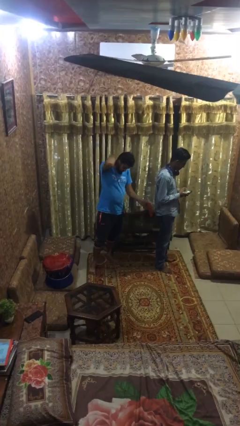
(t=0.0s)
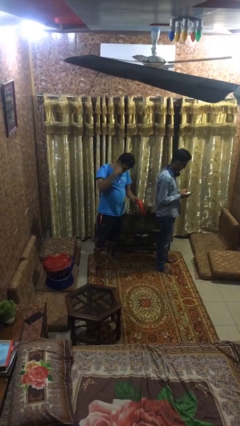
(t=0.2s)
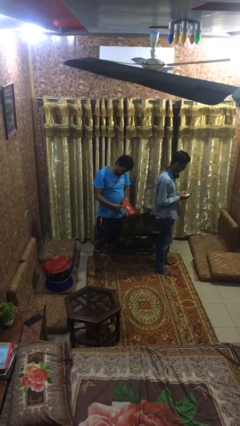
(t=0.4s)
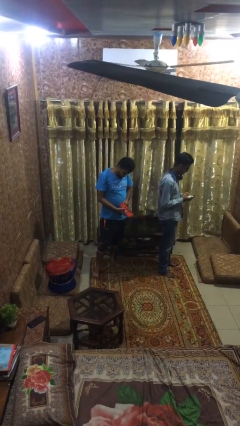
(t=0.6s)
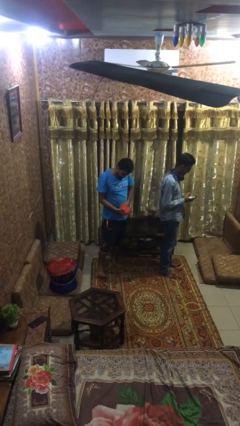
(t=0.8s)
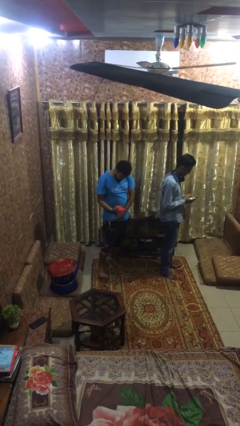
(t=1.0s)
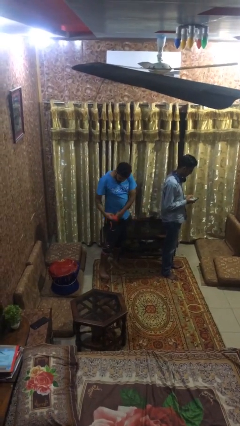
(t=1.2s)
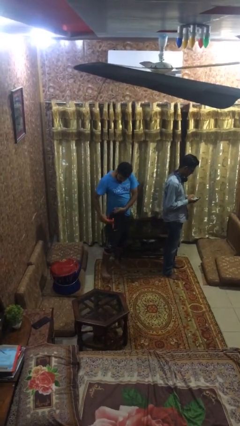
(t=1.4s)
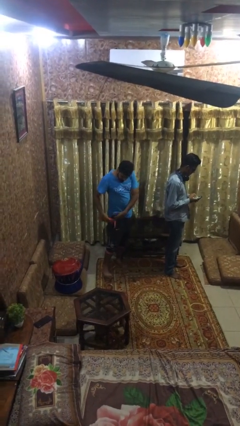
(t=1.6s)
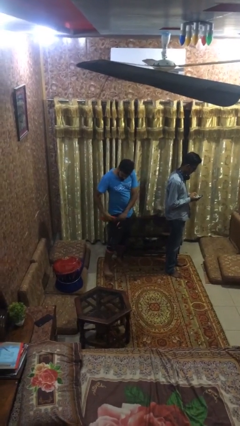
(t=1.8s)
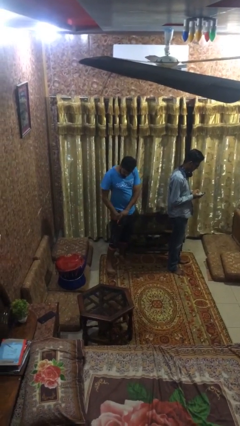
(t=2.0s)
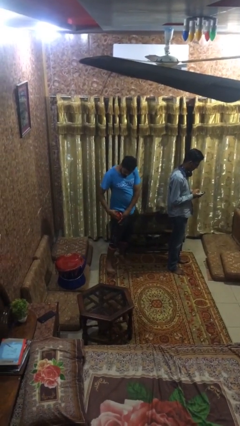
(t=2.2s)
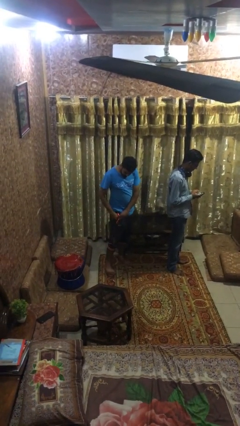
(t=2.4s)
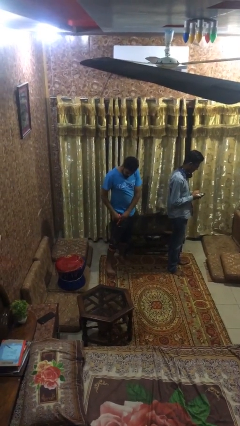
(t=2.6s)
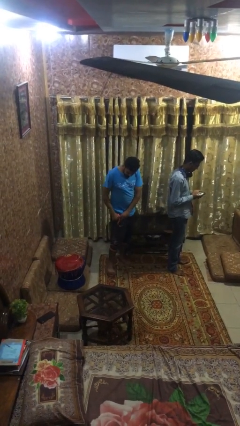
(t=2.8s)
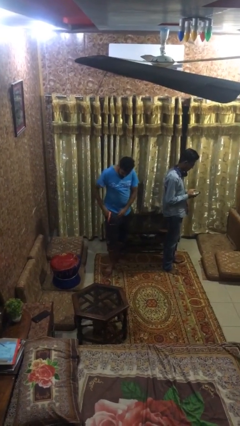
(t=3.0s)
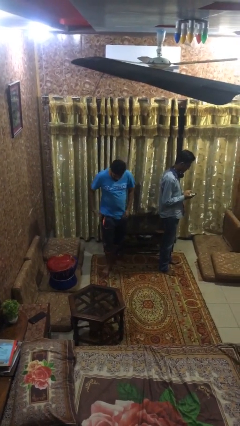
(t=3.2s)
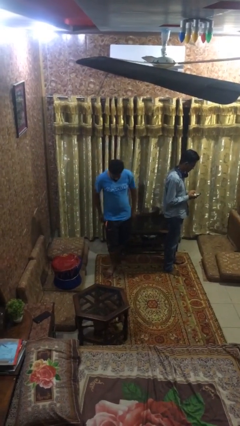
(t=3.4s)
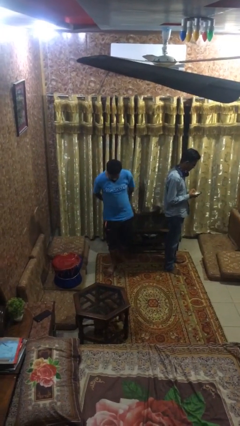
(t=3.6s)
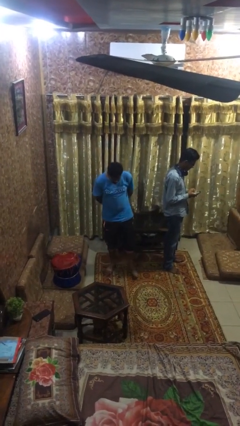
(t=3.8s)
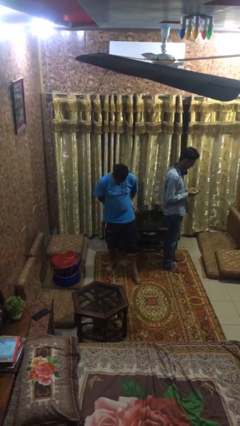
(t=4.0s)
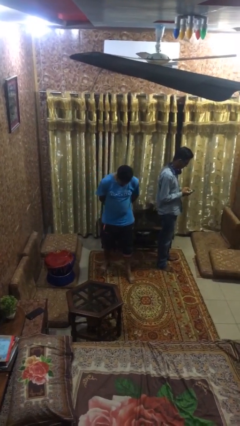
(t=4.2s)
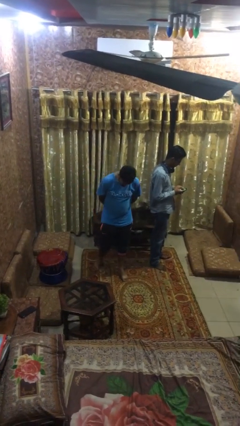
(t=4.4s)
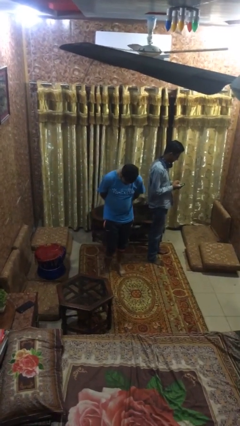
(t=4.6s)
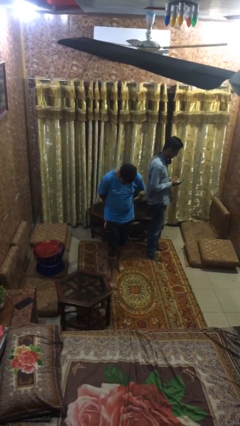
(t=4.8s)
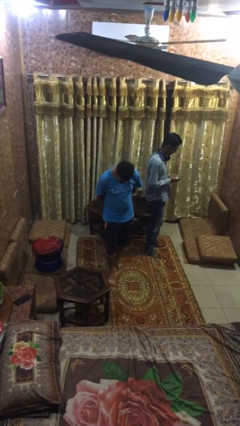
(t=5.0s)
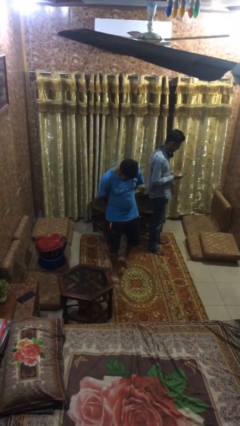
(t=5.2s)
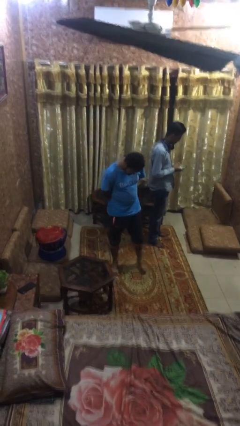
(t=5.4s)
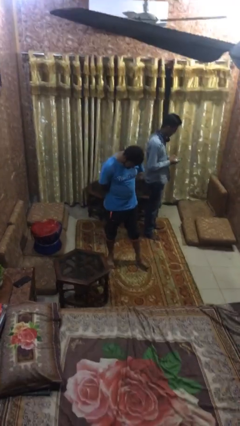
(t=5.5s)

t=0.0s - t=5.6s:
person steals object from person

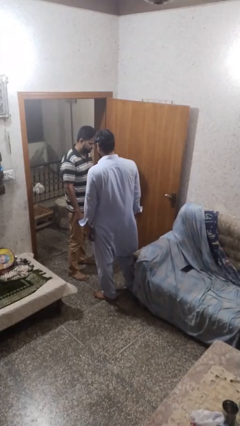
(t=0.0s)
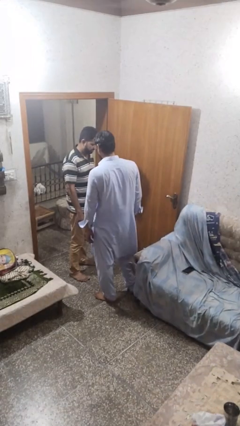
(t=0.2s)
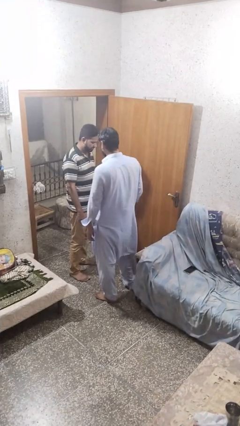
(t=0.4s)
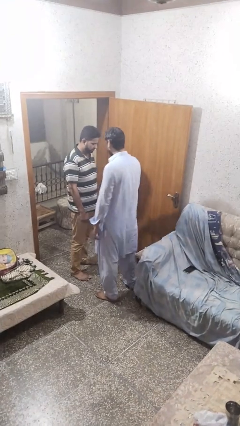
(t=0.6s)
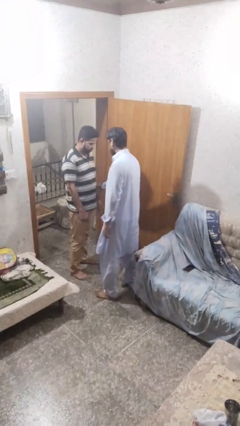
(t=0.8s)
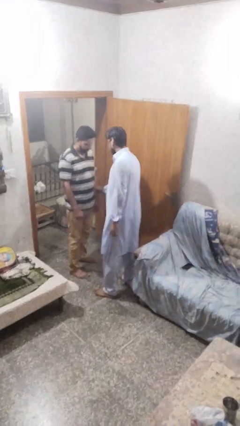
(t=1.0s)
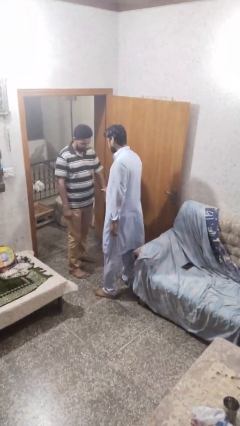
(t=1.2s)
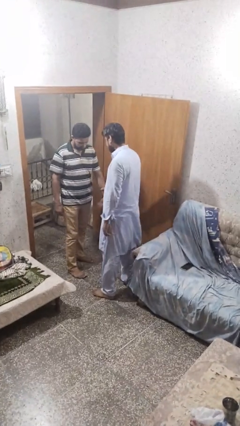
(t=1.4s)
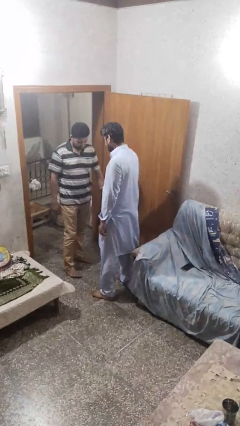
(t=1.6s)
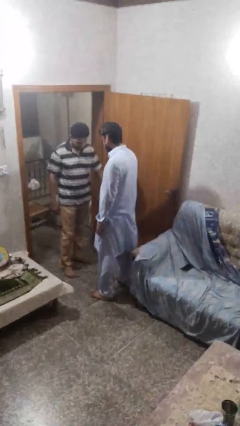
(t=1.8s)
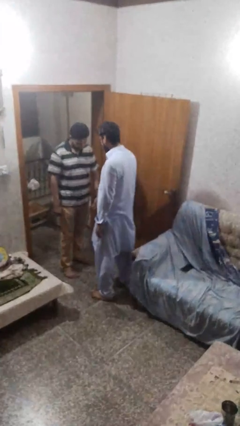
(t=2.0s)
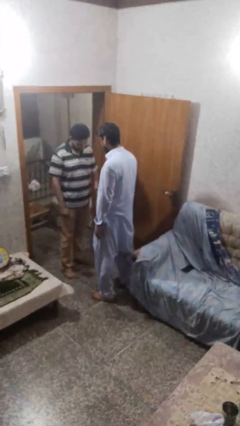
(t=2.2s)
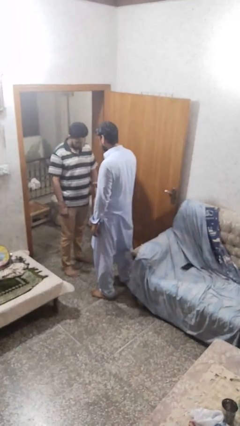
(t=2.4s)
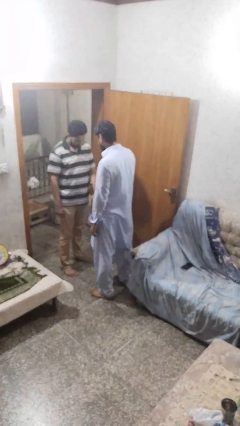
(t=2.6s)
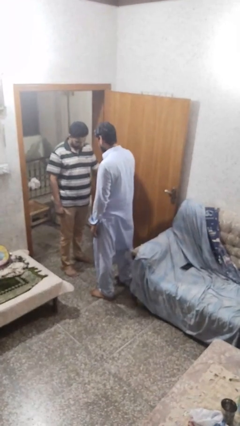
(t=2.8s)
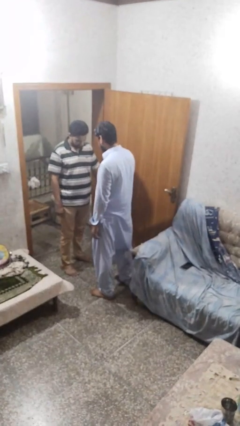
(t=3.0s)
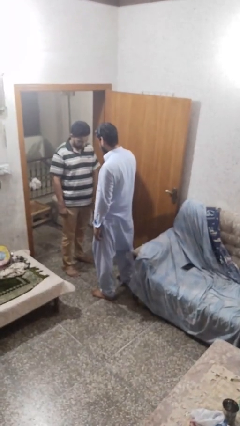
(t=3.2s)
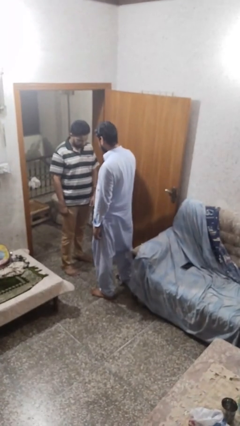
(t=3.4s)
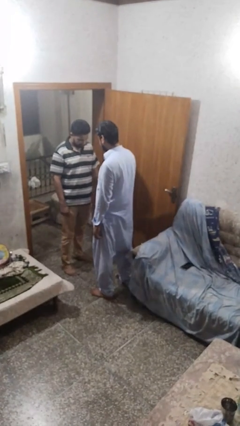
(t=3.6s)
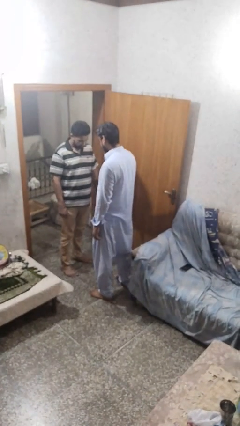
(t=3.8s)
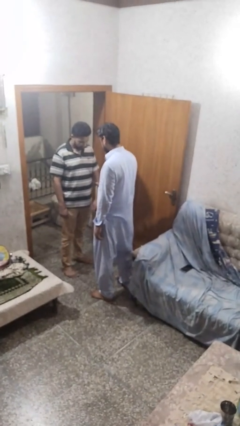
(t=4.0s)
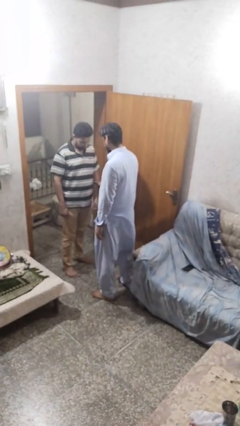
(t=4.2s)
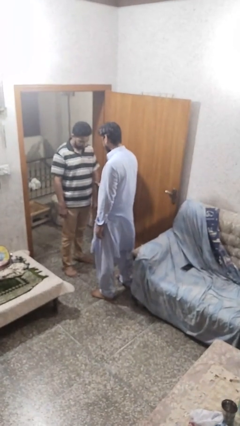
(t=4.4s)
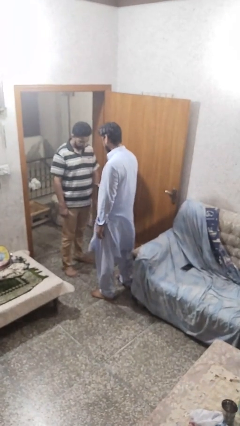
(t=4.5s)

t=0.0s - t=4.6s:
person grabs person by forearm

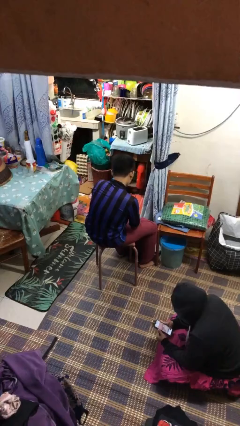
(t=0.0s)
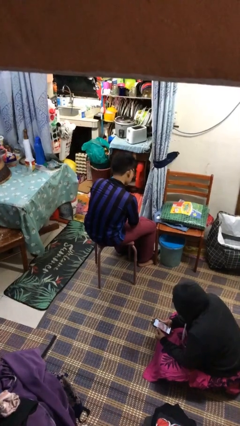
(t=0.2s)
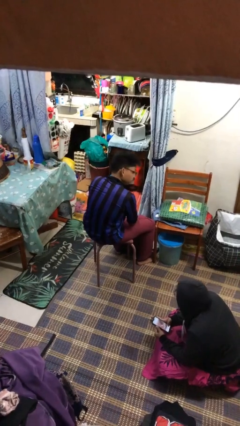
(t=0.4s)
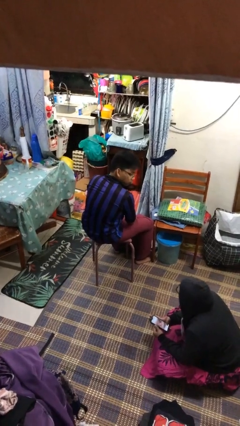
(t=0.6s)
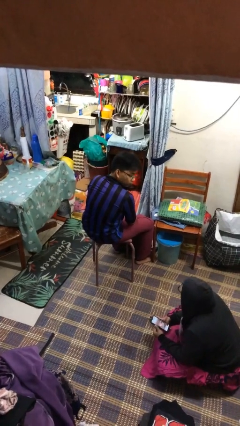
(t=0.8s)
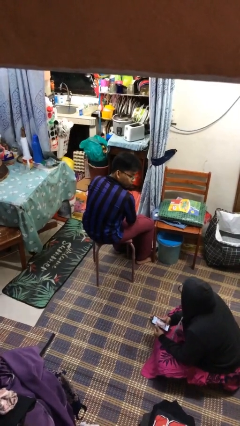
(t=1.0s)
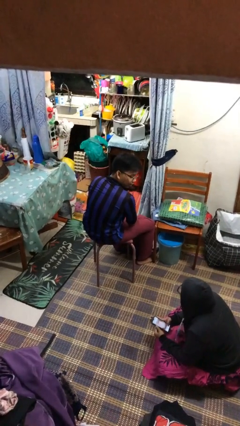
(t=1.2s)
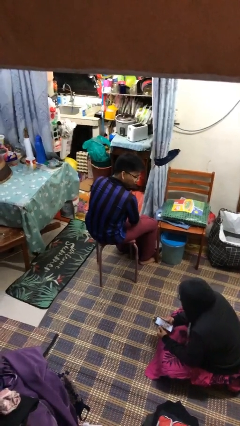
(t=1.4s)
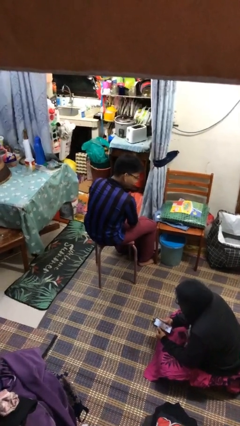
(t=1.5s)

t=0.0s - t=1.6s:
person looks over shoulder

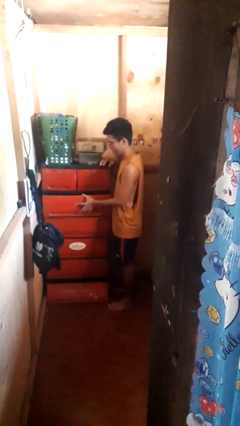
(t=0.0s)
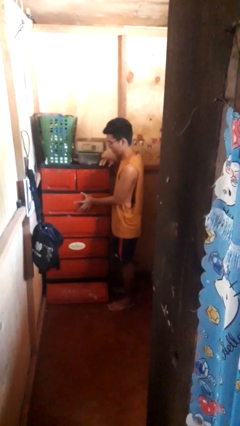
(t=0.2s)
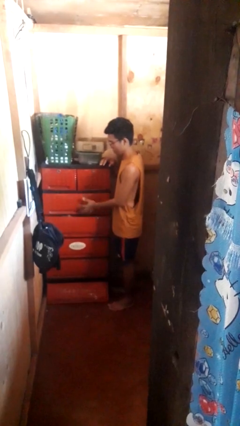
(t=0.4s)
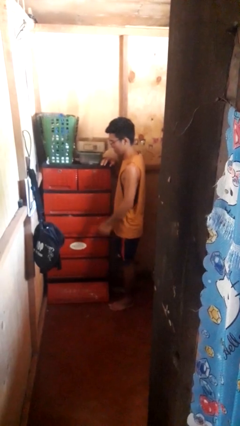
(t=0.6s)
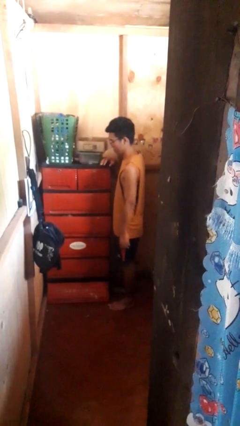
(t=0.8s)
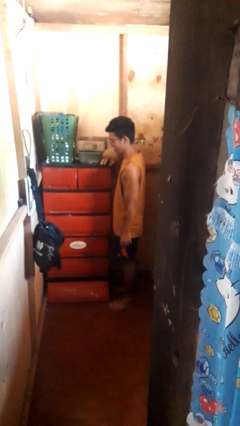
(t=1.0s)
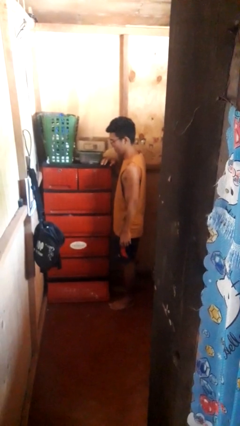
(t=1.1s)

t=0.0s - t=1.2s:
person closes dresser drawer

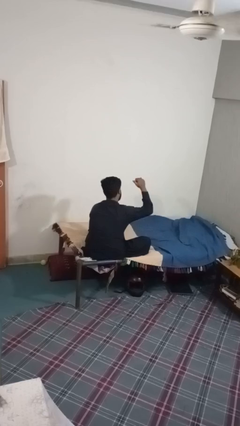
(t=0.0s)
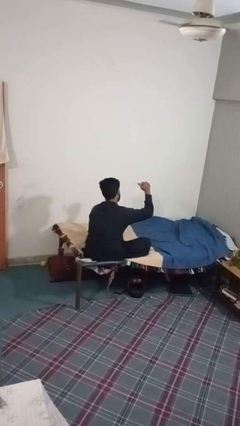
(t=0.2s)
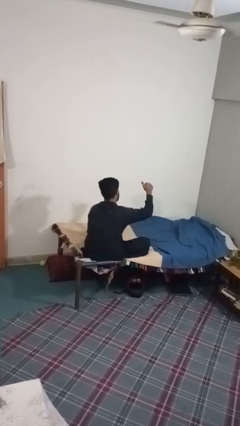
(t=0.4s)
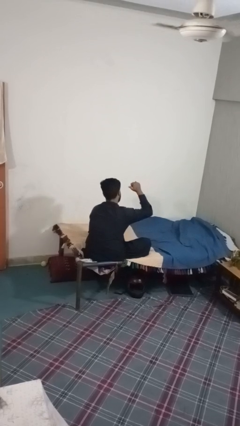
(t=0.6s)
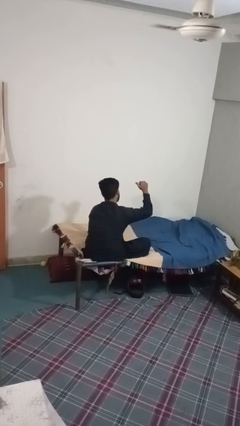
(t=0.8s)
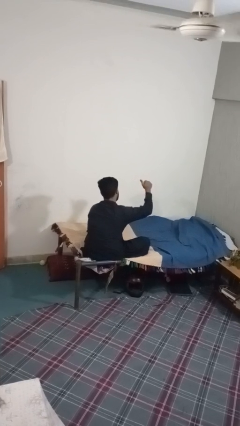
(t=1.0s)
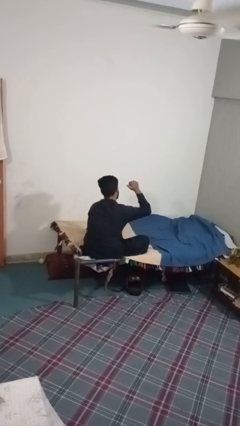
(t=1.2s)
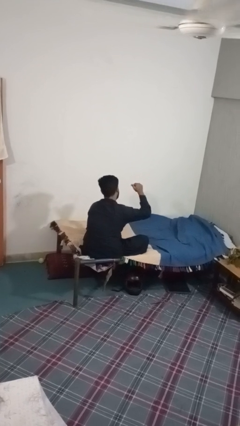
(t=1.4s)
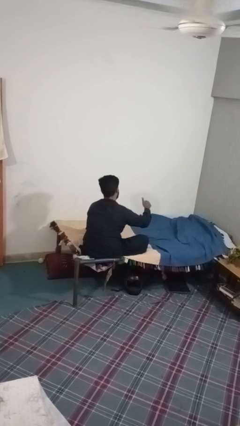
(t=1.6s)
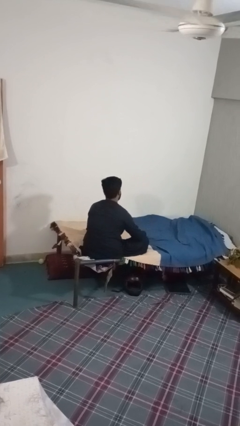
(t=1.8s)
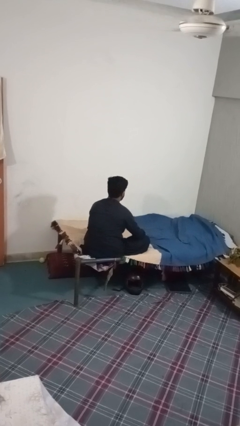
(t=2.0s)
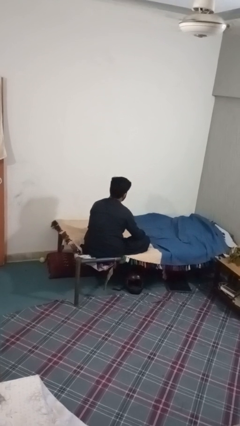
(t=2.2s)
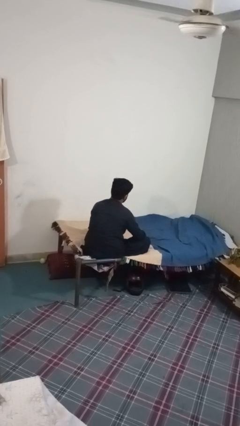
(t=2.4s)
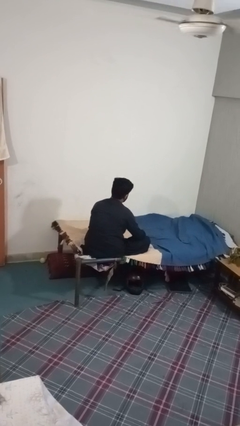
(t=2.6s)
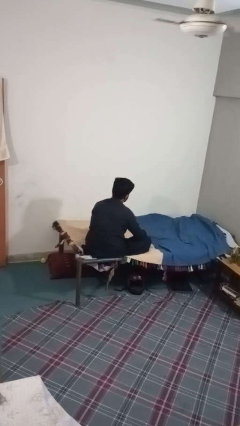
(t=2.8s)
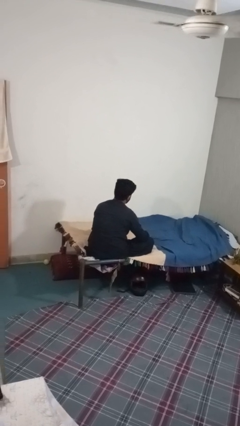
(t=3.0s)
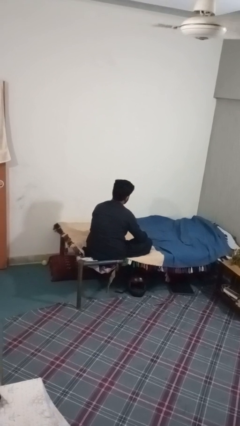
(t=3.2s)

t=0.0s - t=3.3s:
person gestures behind me

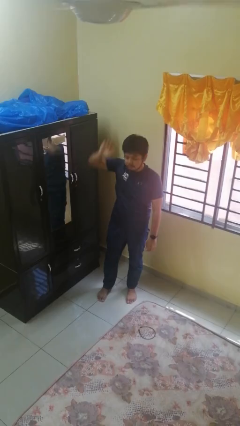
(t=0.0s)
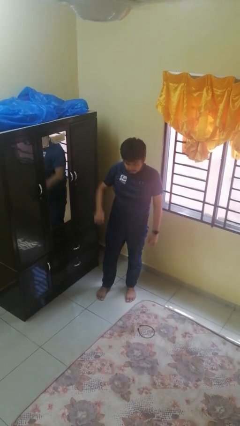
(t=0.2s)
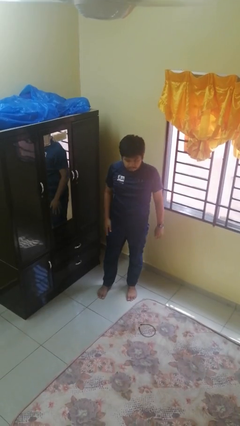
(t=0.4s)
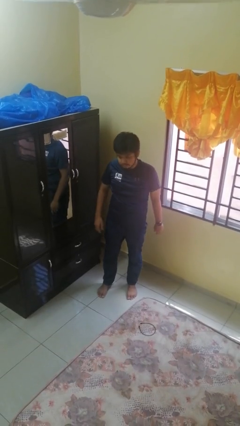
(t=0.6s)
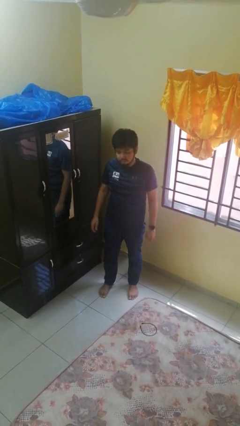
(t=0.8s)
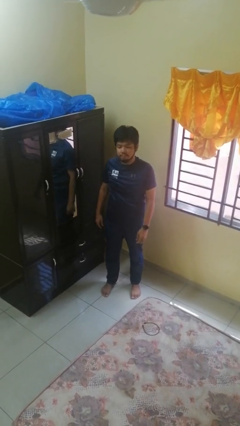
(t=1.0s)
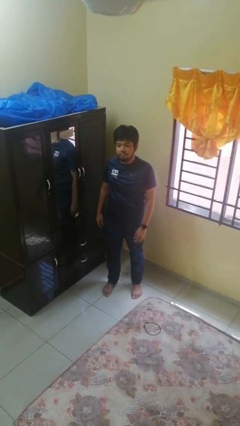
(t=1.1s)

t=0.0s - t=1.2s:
person gestures lower hand
